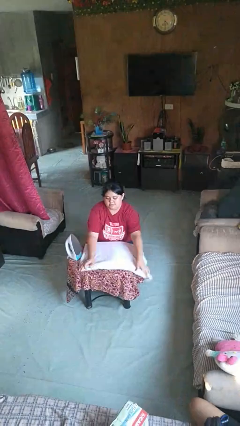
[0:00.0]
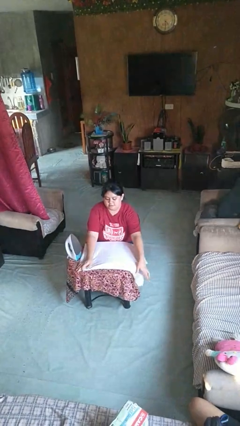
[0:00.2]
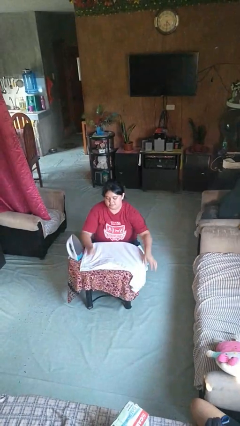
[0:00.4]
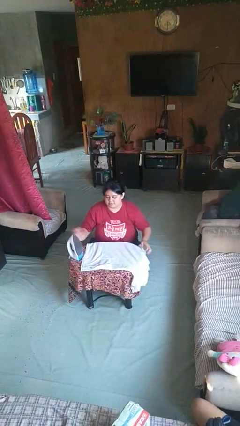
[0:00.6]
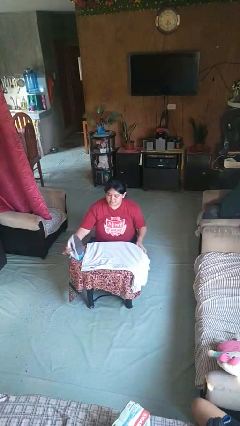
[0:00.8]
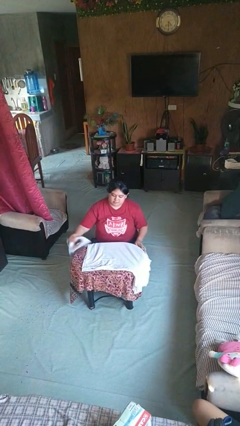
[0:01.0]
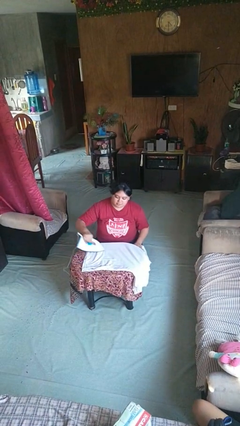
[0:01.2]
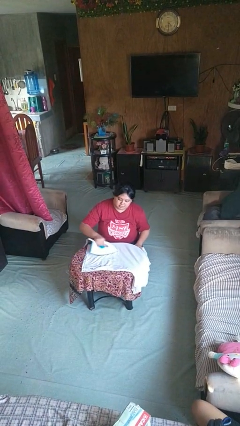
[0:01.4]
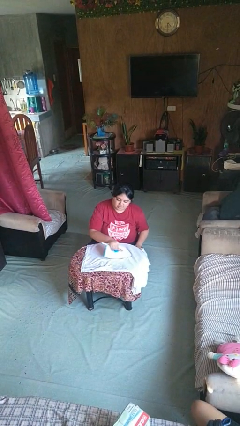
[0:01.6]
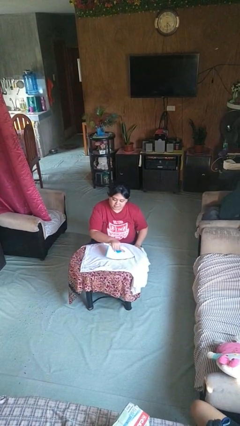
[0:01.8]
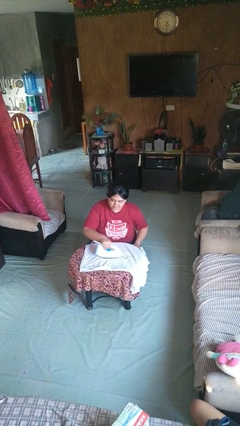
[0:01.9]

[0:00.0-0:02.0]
person irons clothes

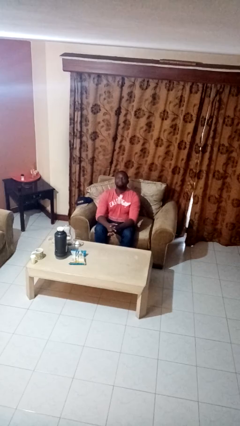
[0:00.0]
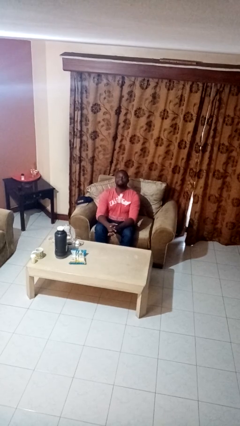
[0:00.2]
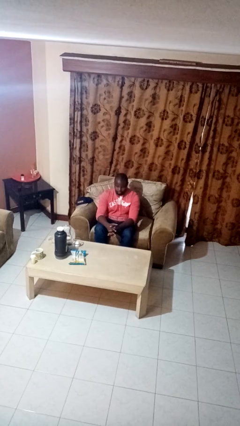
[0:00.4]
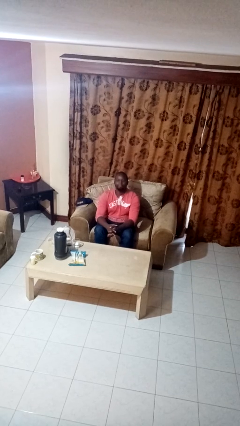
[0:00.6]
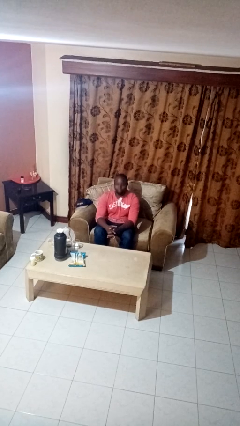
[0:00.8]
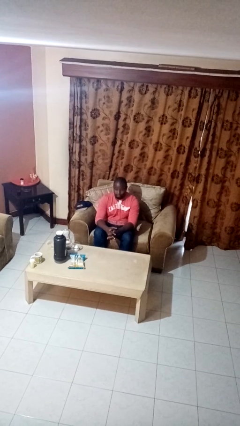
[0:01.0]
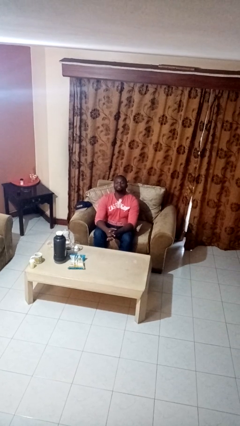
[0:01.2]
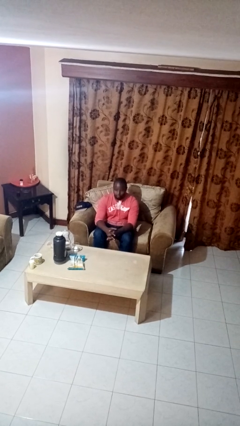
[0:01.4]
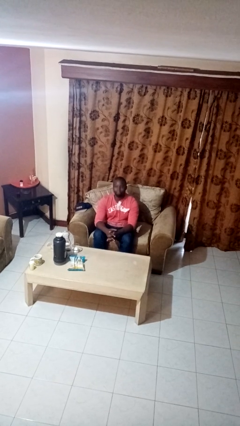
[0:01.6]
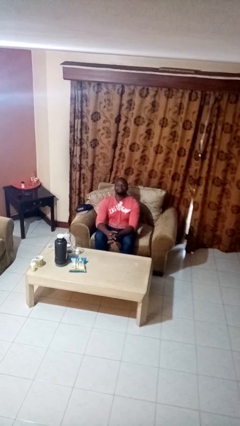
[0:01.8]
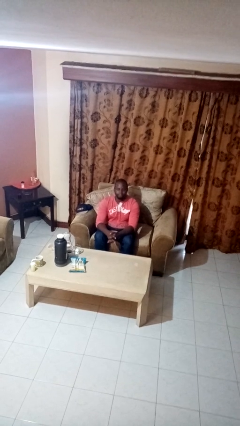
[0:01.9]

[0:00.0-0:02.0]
person nods head

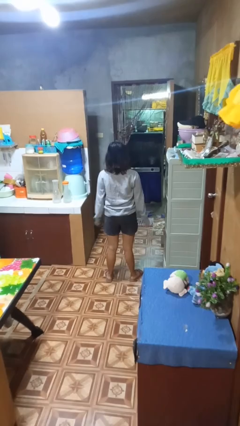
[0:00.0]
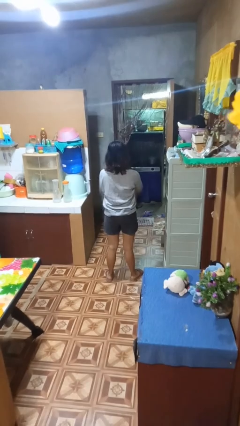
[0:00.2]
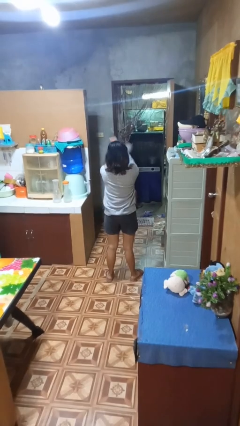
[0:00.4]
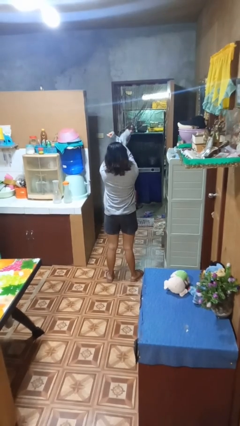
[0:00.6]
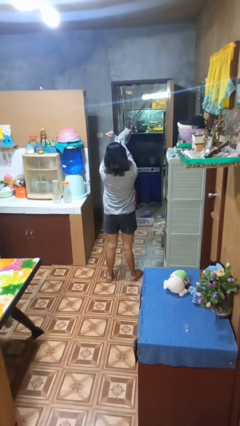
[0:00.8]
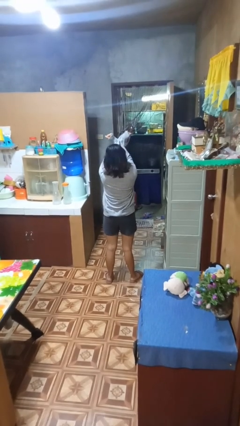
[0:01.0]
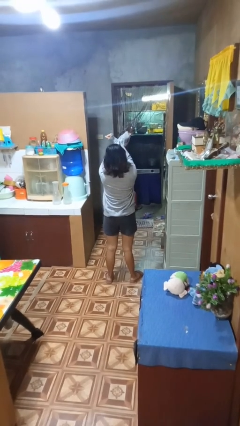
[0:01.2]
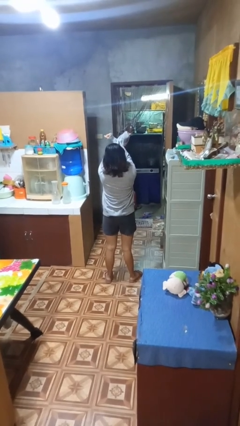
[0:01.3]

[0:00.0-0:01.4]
person gestures arms x

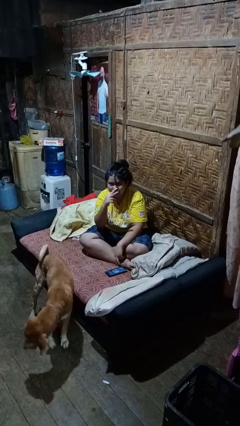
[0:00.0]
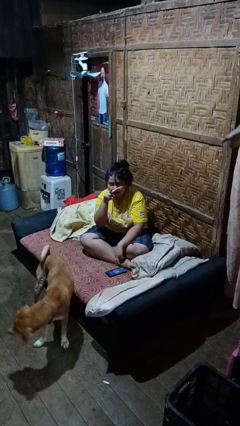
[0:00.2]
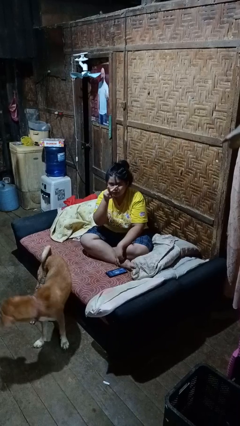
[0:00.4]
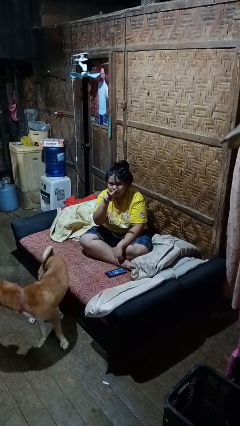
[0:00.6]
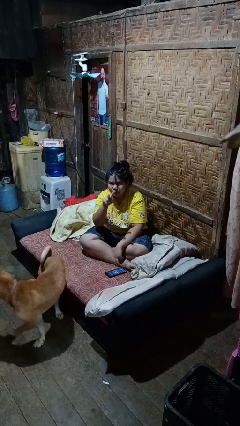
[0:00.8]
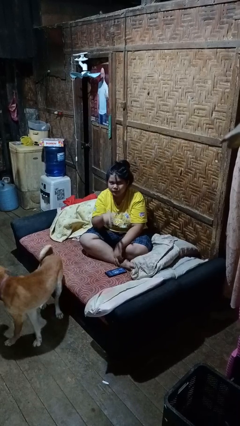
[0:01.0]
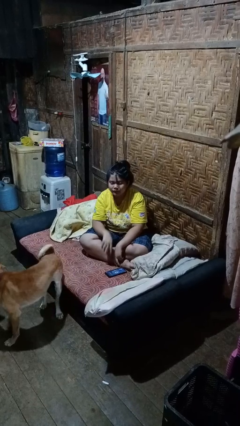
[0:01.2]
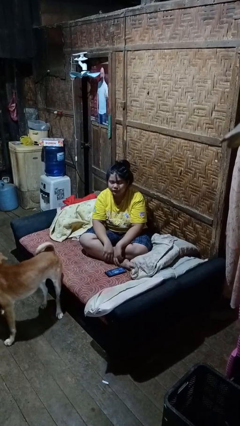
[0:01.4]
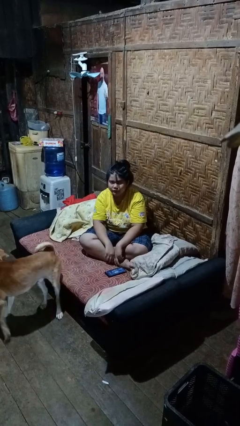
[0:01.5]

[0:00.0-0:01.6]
person gestures watch closely

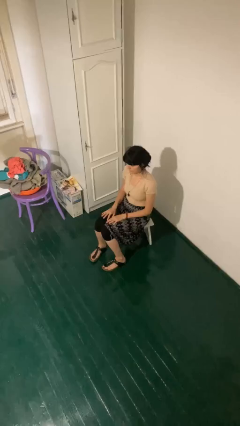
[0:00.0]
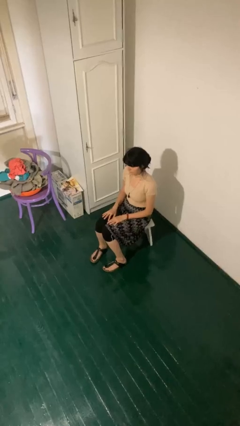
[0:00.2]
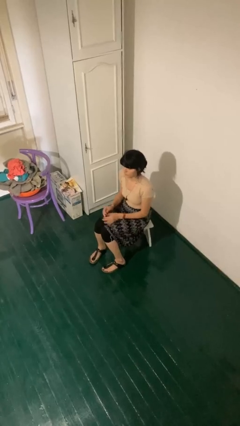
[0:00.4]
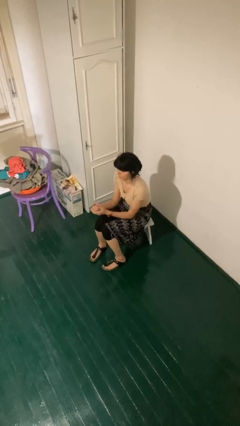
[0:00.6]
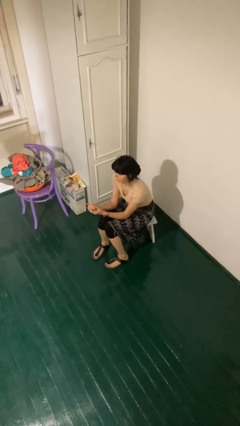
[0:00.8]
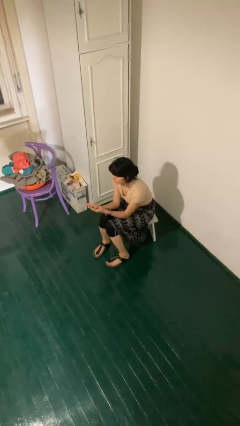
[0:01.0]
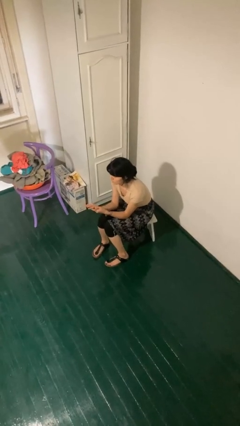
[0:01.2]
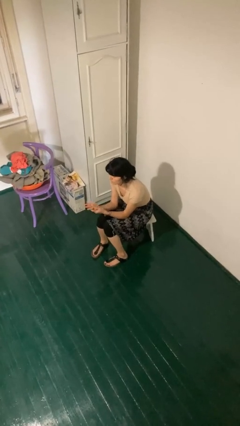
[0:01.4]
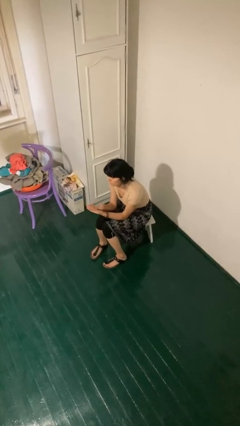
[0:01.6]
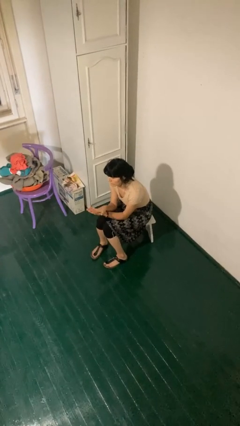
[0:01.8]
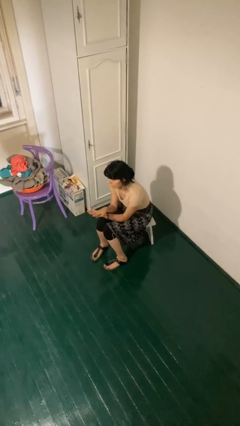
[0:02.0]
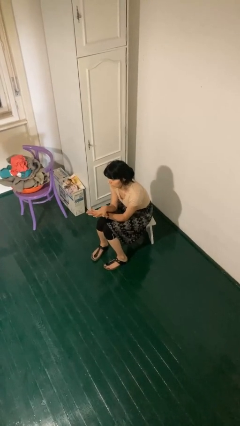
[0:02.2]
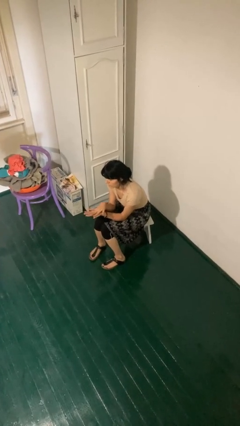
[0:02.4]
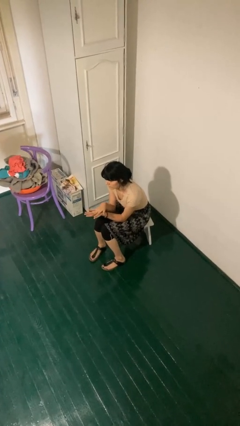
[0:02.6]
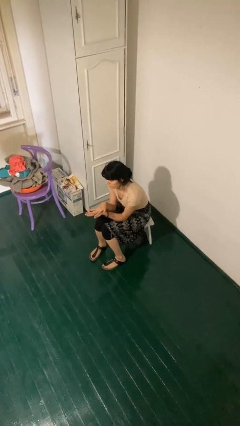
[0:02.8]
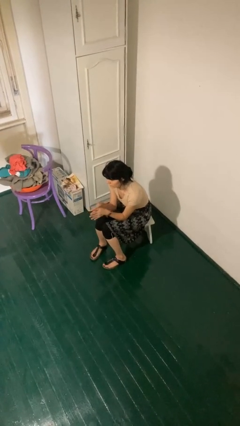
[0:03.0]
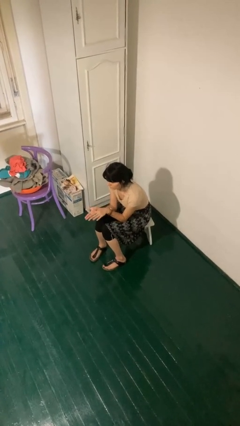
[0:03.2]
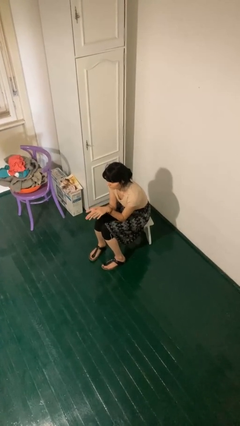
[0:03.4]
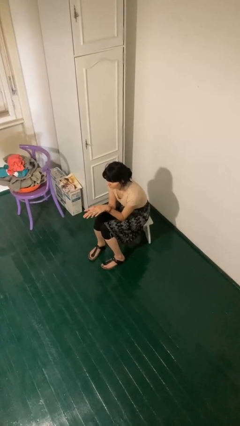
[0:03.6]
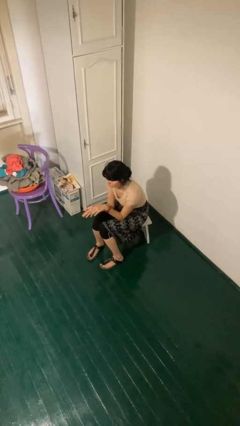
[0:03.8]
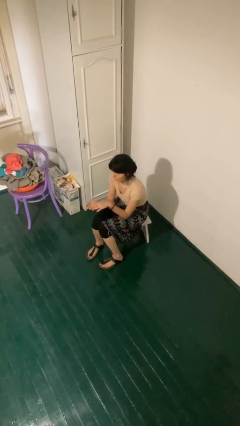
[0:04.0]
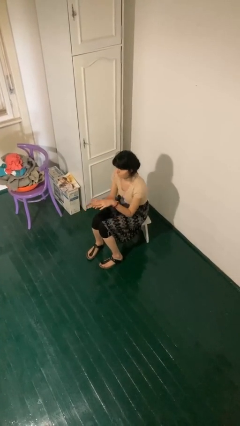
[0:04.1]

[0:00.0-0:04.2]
person looks at hands in lap

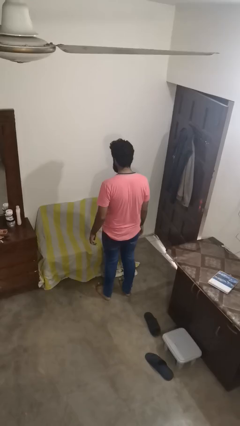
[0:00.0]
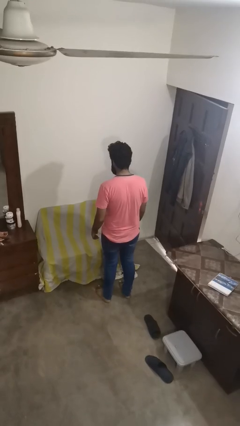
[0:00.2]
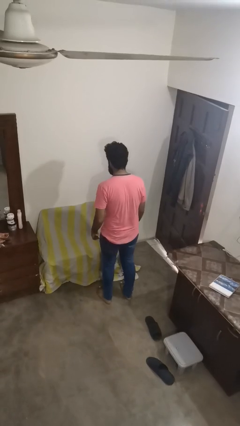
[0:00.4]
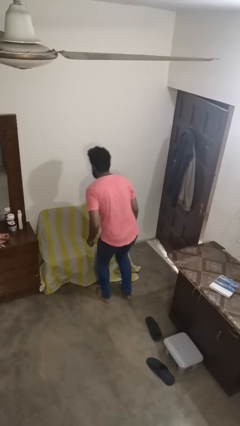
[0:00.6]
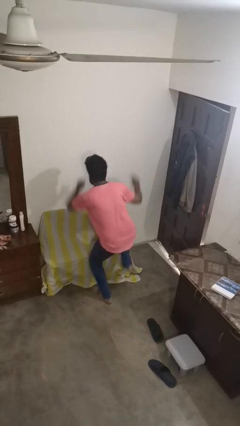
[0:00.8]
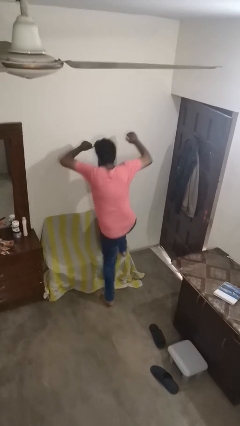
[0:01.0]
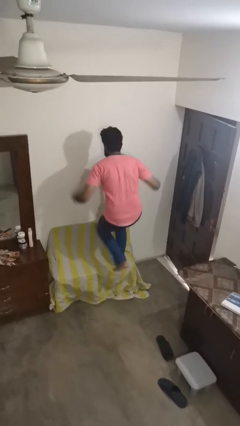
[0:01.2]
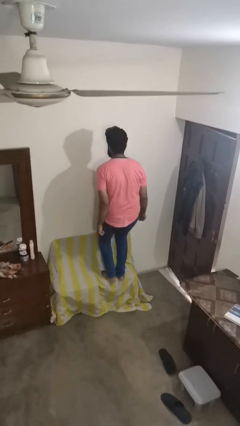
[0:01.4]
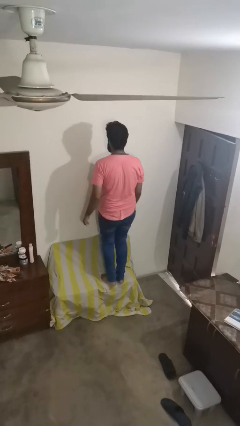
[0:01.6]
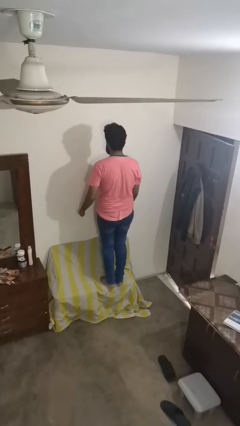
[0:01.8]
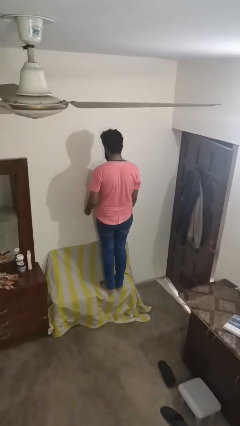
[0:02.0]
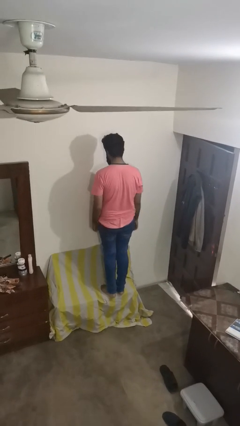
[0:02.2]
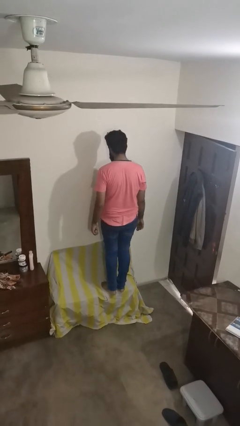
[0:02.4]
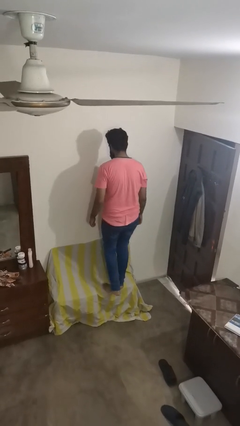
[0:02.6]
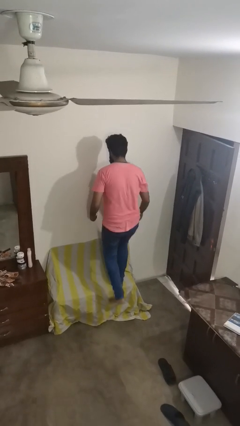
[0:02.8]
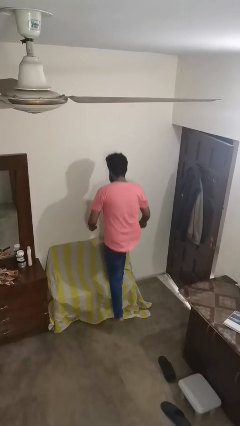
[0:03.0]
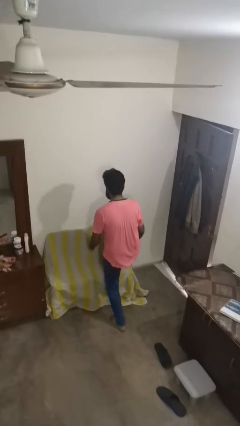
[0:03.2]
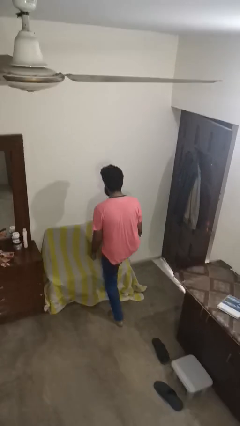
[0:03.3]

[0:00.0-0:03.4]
person jumps on couch

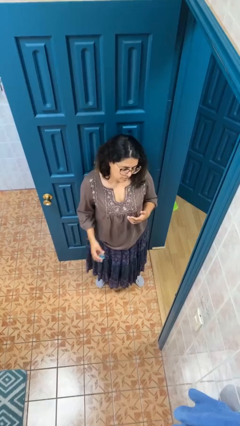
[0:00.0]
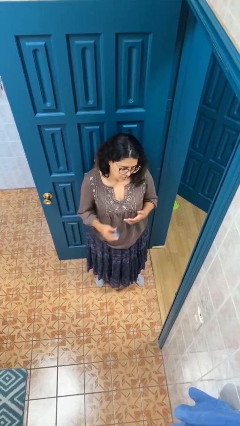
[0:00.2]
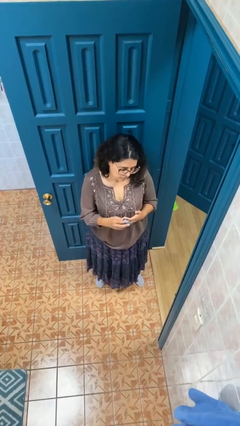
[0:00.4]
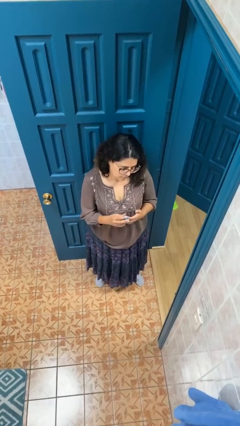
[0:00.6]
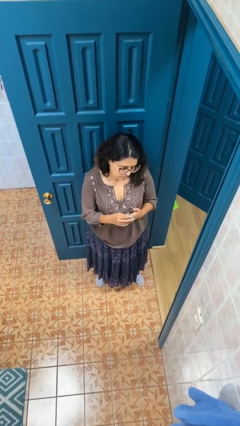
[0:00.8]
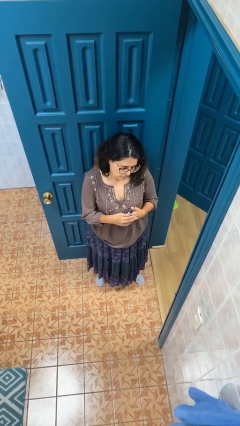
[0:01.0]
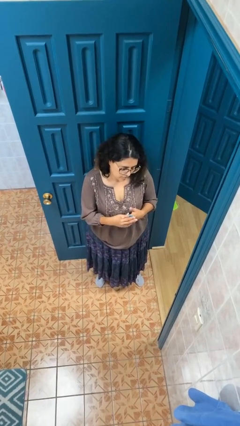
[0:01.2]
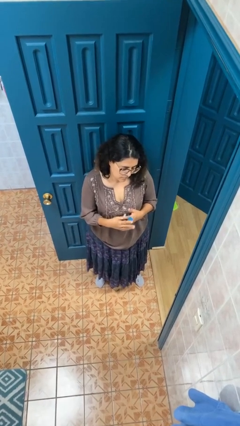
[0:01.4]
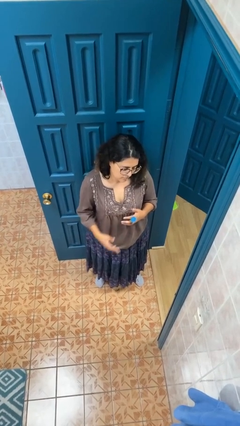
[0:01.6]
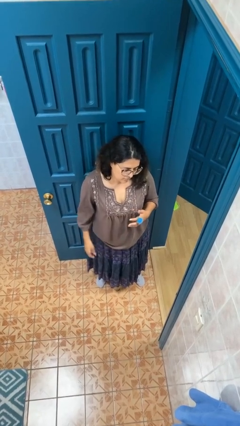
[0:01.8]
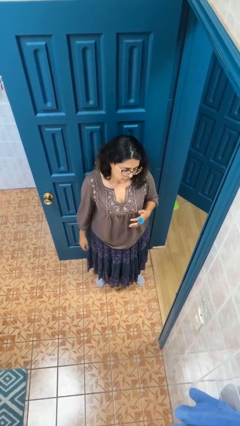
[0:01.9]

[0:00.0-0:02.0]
person puts on ring

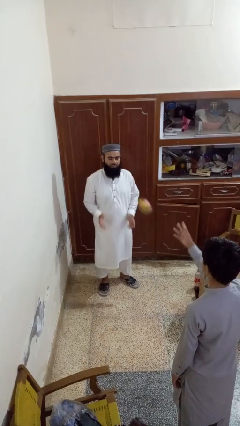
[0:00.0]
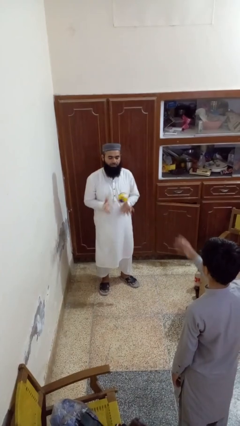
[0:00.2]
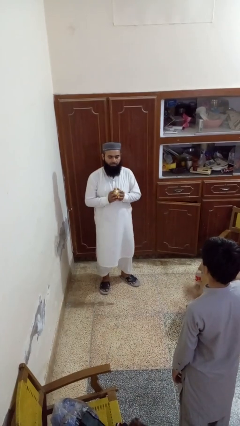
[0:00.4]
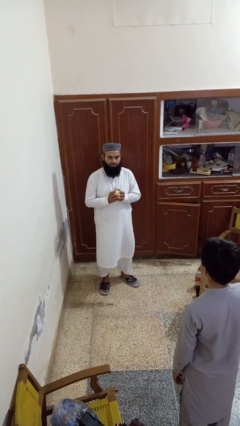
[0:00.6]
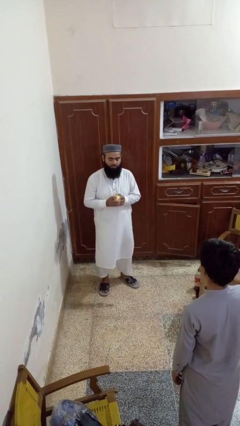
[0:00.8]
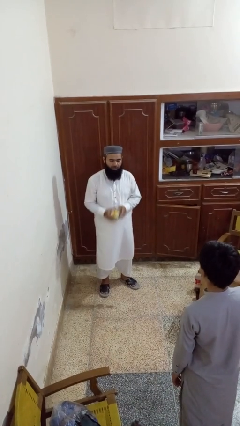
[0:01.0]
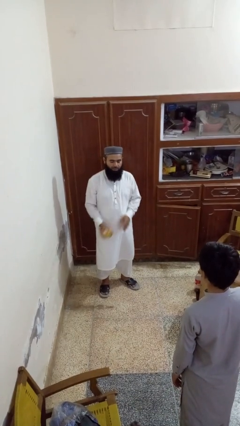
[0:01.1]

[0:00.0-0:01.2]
person catches object from person
